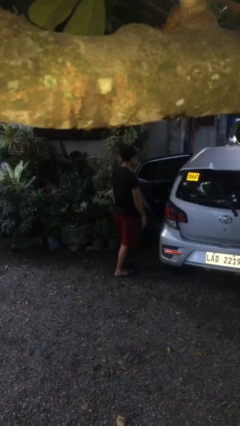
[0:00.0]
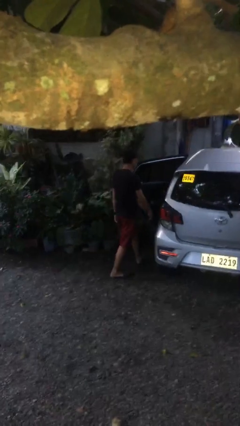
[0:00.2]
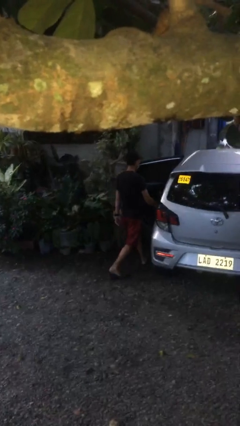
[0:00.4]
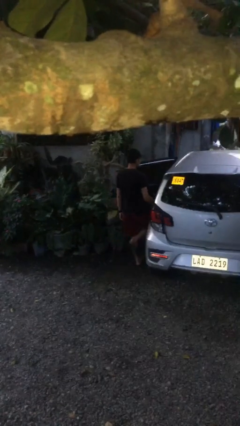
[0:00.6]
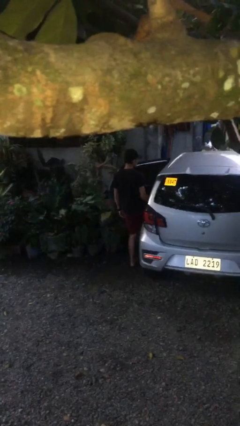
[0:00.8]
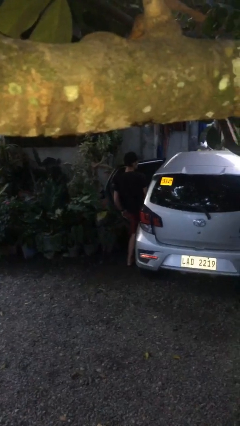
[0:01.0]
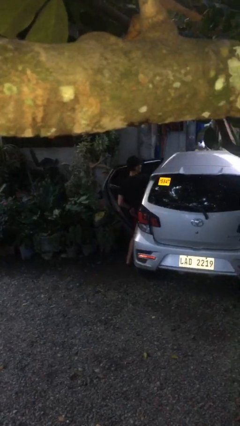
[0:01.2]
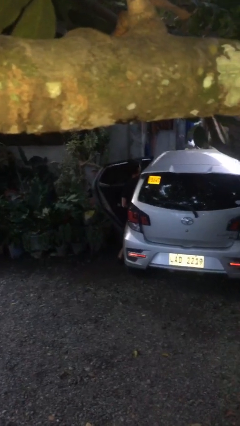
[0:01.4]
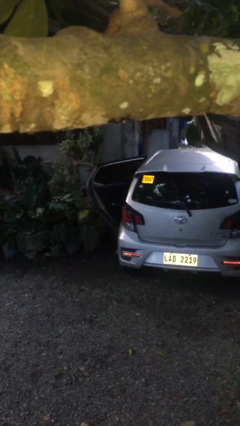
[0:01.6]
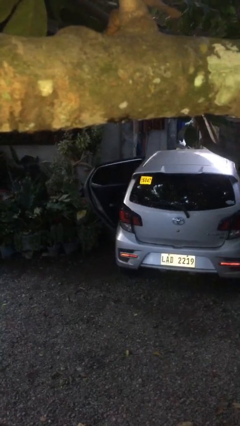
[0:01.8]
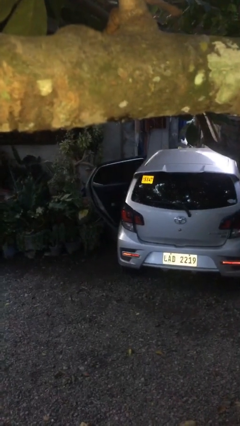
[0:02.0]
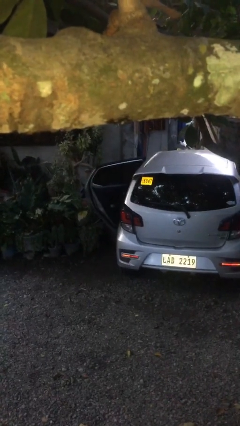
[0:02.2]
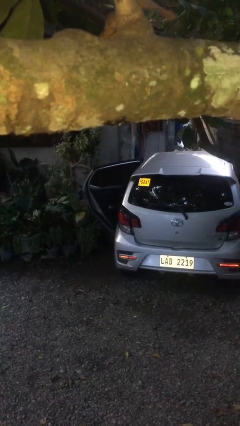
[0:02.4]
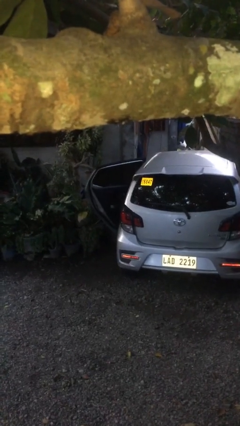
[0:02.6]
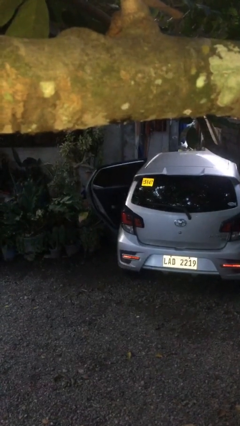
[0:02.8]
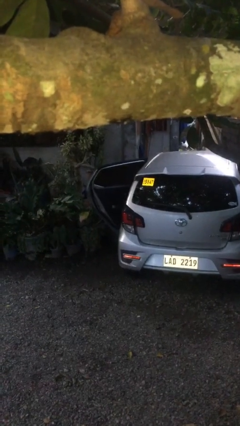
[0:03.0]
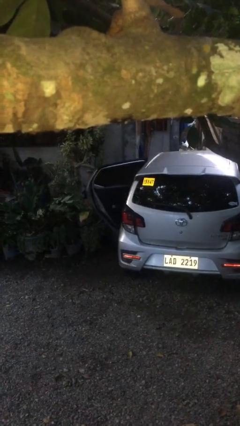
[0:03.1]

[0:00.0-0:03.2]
person enters car

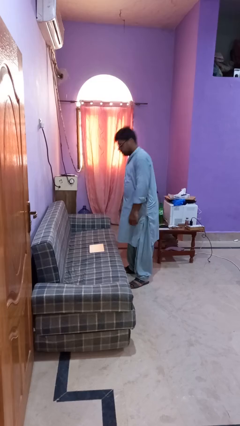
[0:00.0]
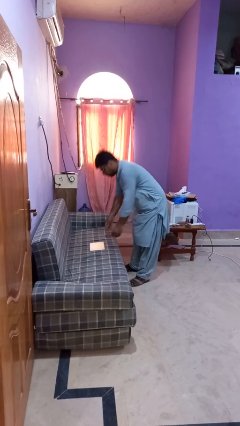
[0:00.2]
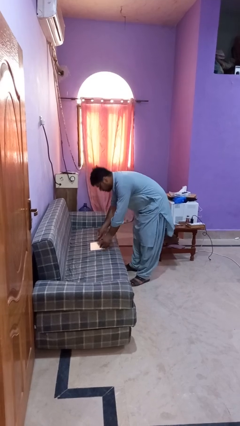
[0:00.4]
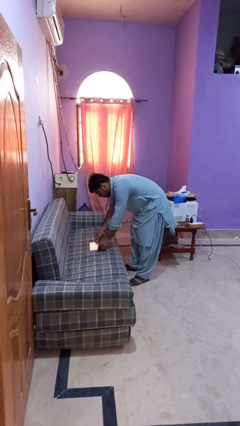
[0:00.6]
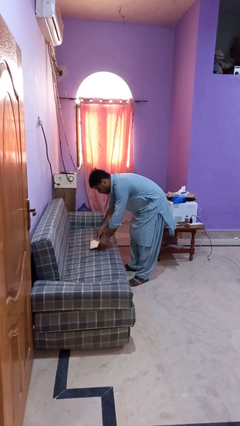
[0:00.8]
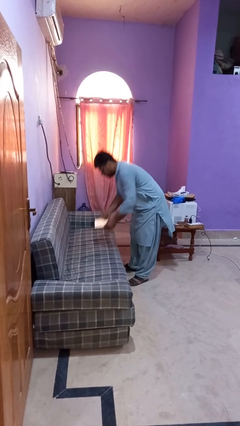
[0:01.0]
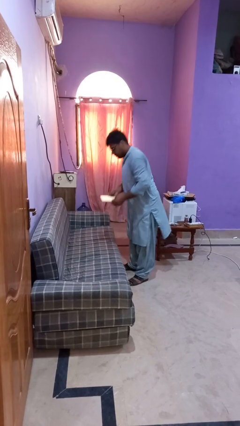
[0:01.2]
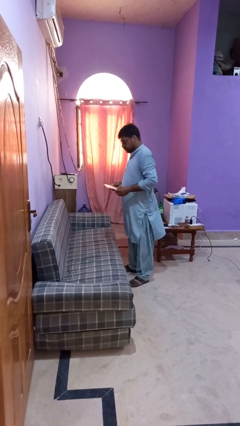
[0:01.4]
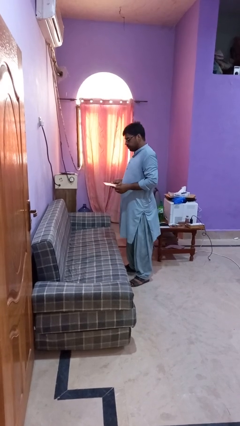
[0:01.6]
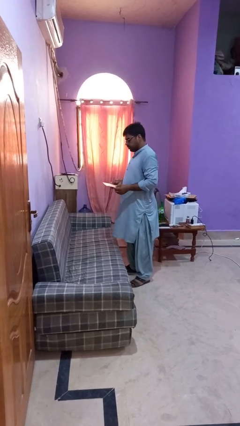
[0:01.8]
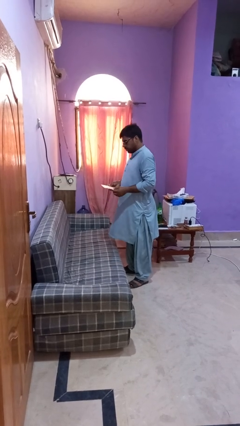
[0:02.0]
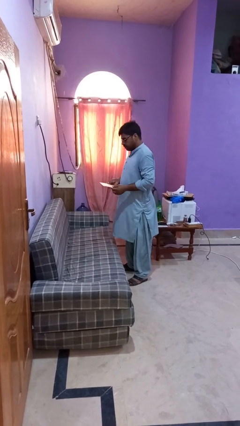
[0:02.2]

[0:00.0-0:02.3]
person picks up object from couch

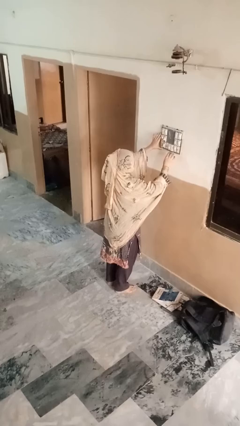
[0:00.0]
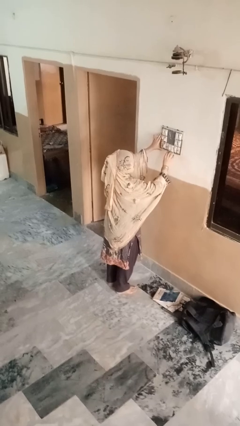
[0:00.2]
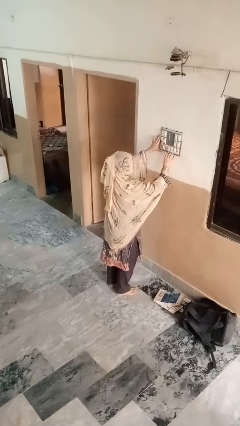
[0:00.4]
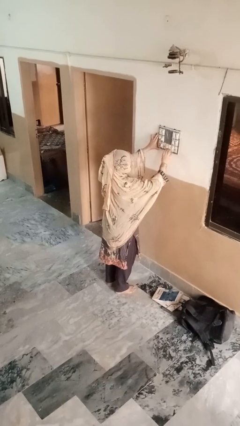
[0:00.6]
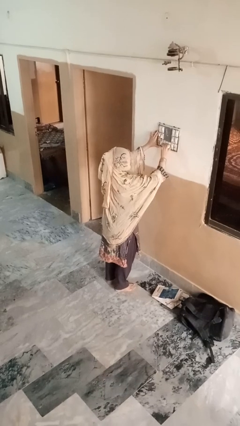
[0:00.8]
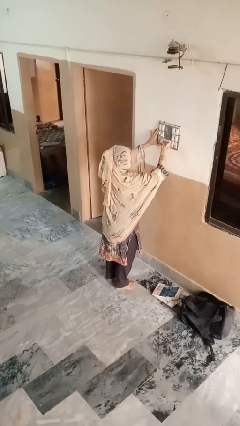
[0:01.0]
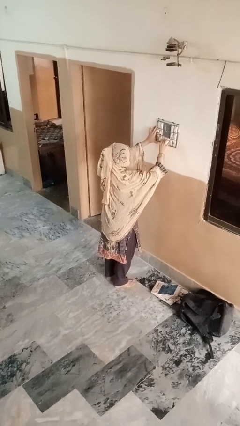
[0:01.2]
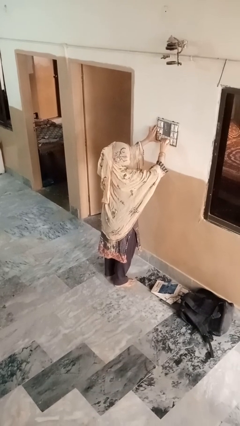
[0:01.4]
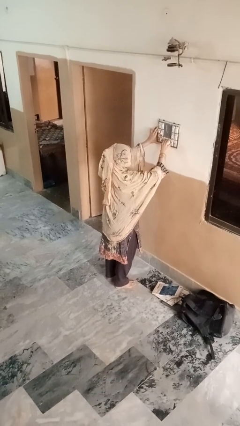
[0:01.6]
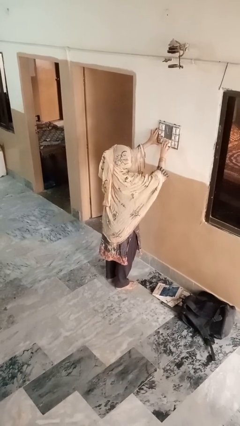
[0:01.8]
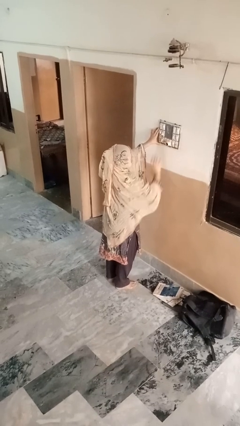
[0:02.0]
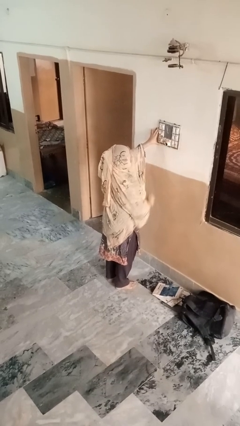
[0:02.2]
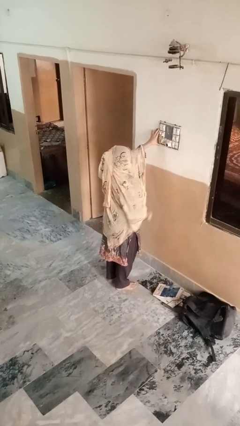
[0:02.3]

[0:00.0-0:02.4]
person plugs into electrical socket

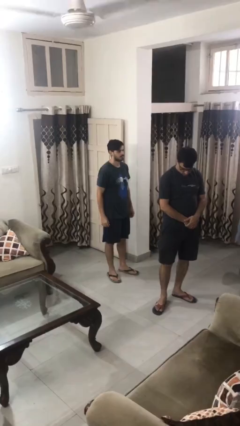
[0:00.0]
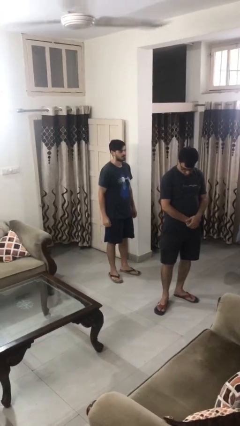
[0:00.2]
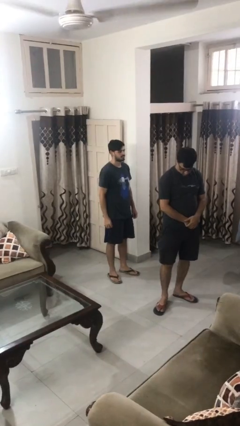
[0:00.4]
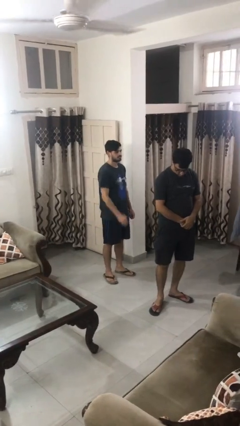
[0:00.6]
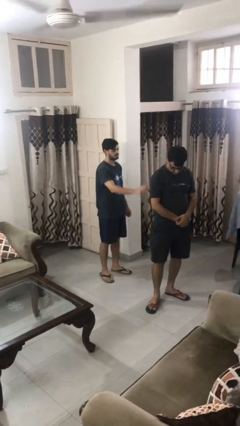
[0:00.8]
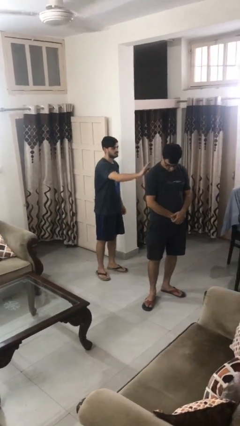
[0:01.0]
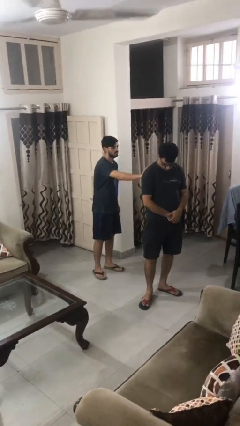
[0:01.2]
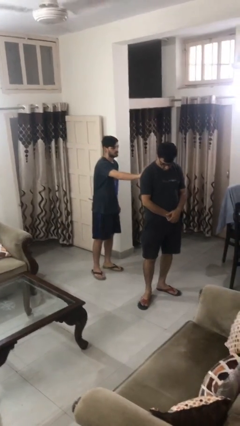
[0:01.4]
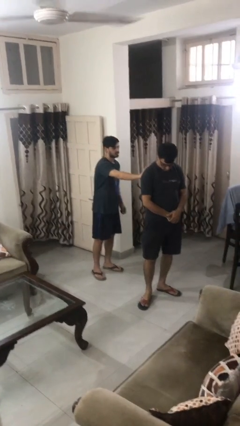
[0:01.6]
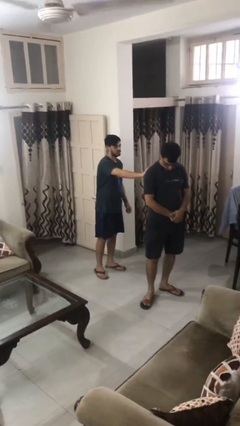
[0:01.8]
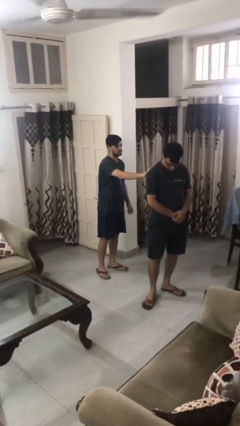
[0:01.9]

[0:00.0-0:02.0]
person touches back of person

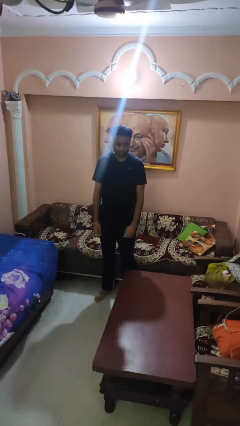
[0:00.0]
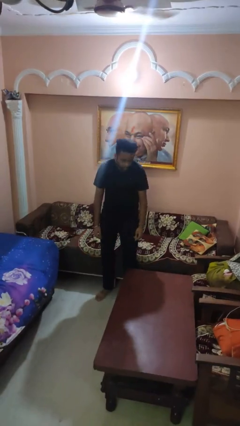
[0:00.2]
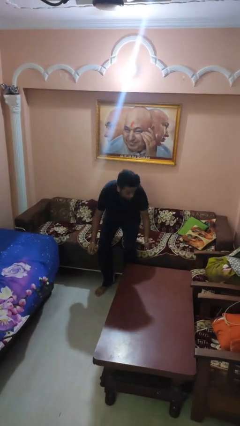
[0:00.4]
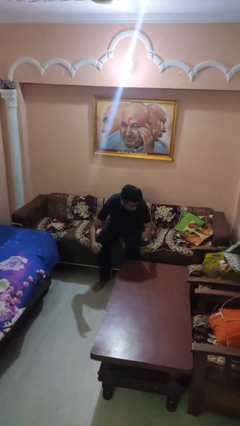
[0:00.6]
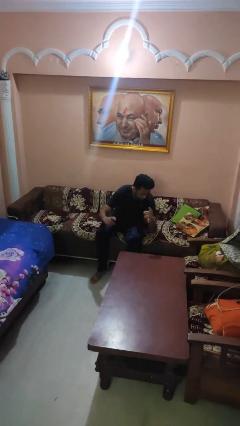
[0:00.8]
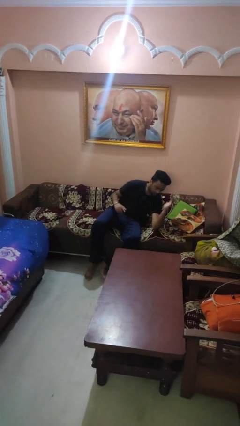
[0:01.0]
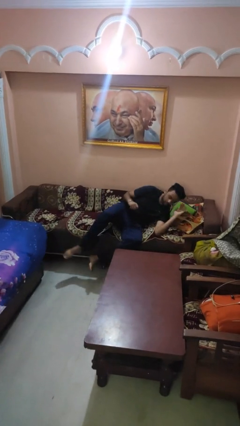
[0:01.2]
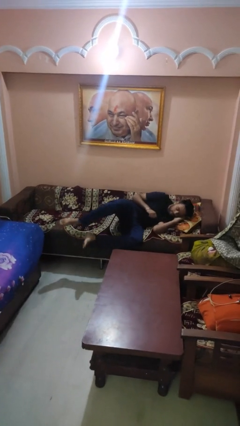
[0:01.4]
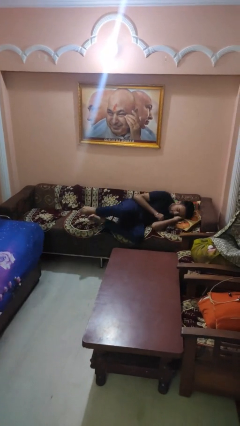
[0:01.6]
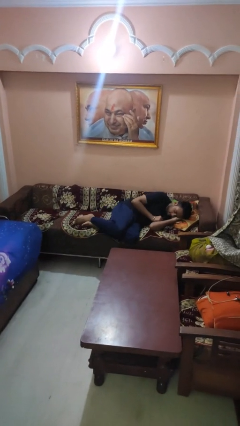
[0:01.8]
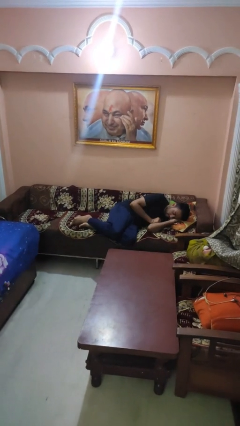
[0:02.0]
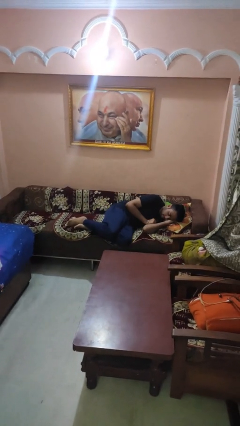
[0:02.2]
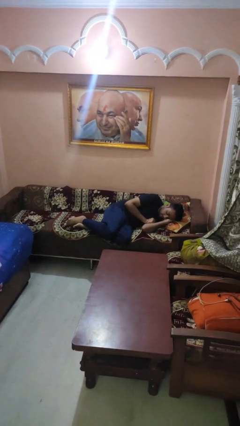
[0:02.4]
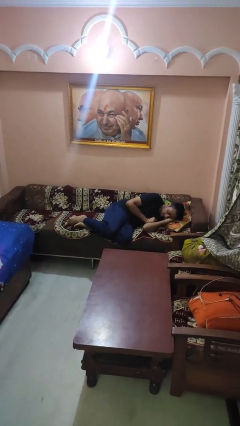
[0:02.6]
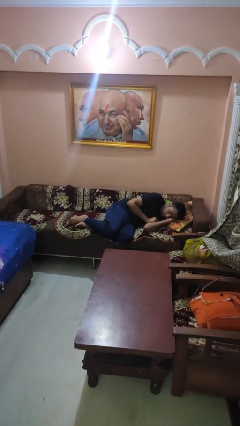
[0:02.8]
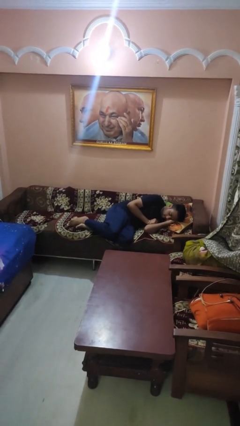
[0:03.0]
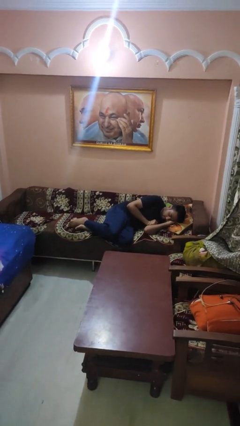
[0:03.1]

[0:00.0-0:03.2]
person lies down on couch

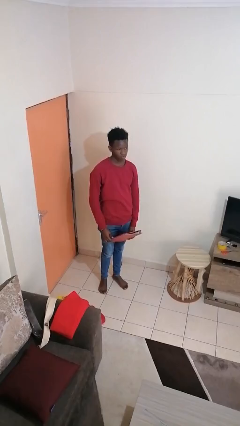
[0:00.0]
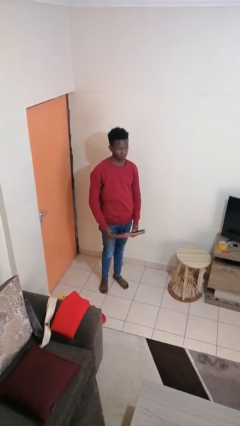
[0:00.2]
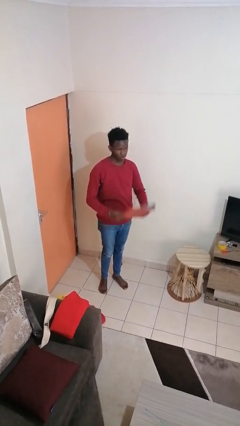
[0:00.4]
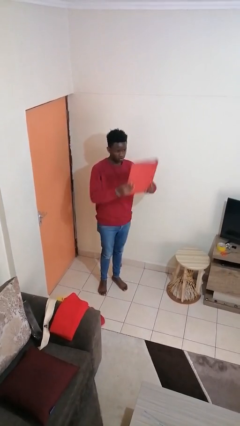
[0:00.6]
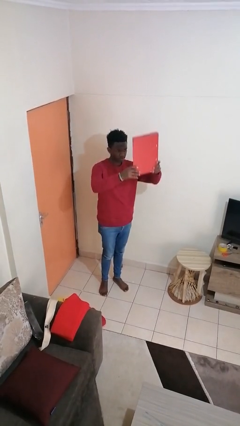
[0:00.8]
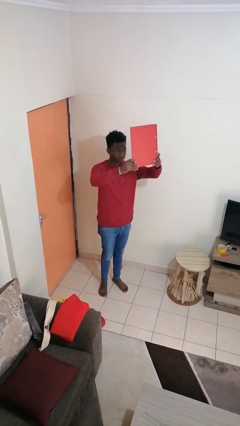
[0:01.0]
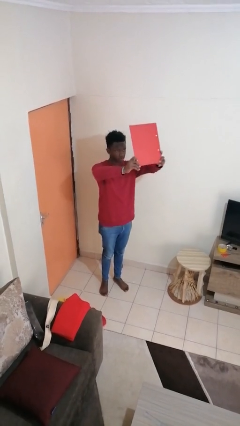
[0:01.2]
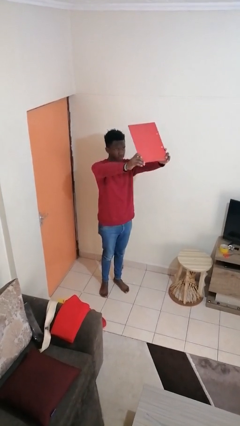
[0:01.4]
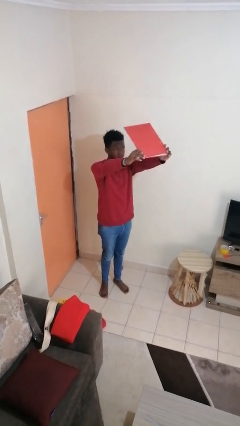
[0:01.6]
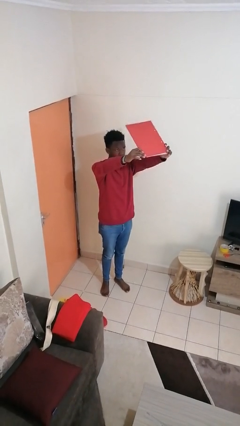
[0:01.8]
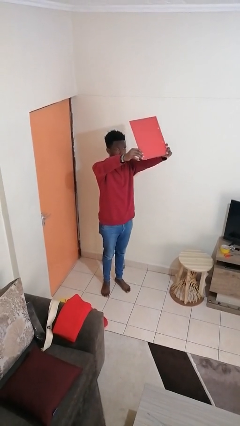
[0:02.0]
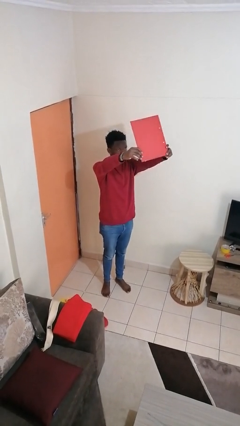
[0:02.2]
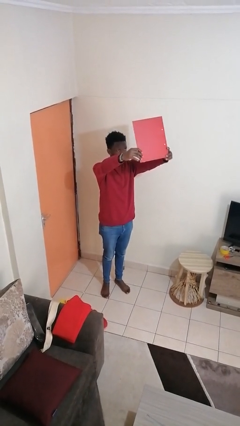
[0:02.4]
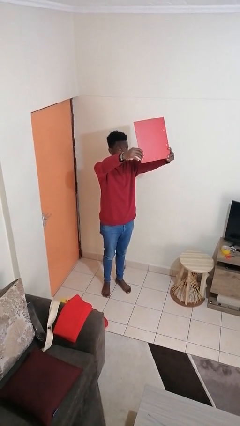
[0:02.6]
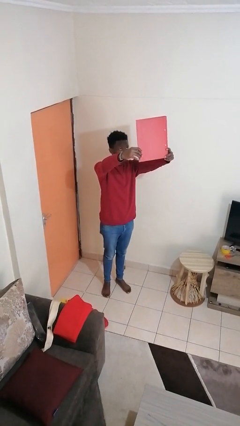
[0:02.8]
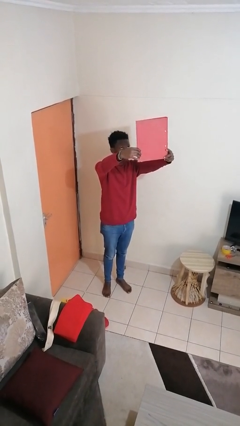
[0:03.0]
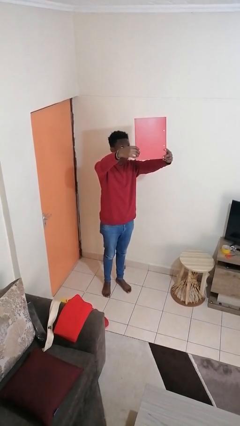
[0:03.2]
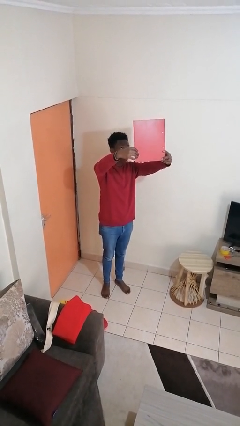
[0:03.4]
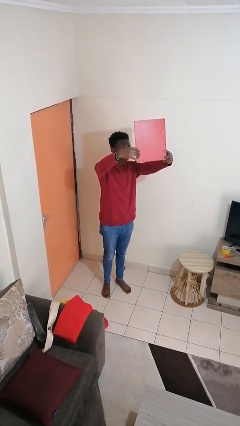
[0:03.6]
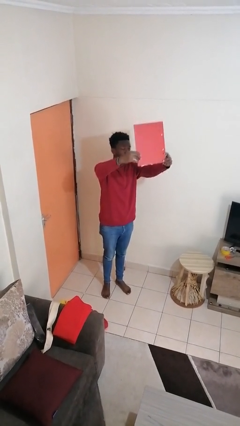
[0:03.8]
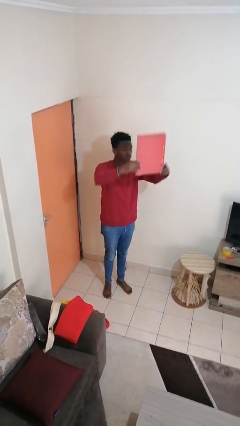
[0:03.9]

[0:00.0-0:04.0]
person holds object above head
